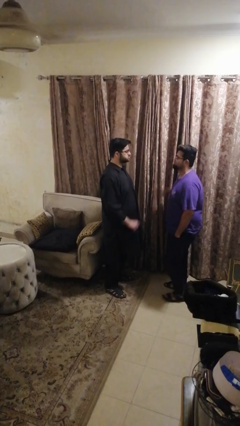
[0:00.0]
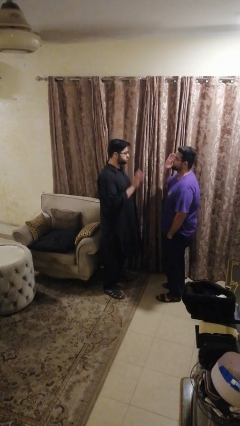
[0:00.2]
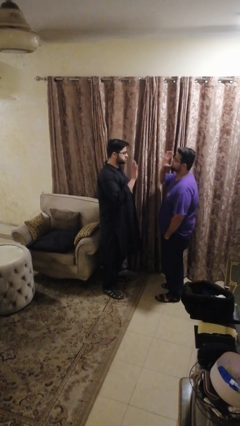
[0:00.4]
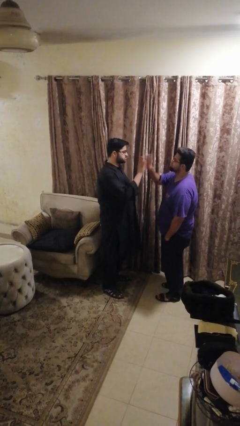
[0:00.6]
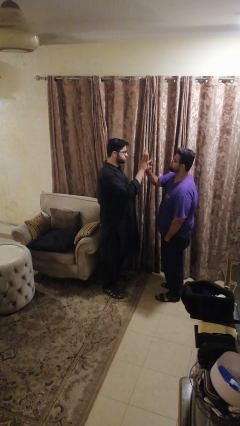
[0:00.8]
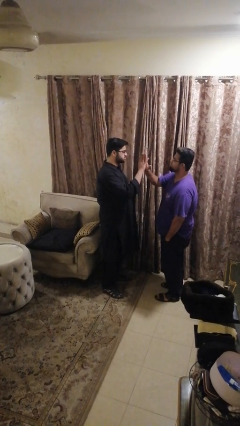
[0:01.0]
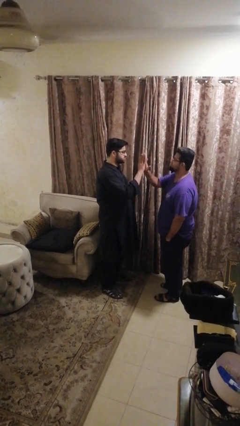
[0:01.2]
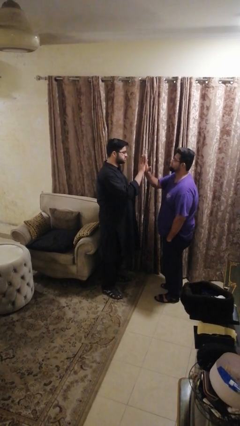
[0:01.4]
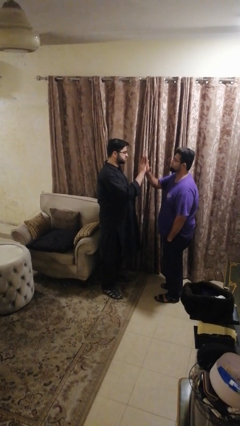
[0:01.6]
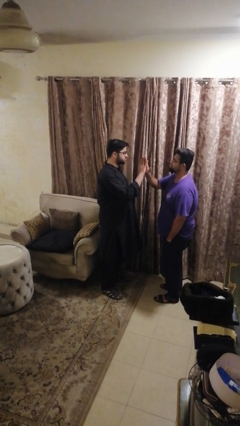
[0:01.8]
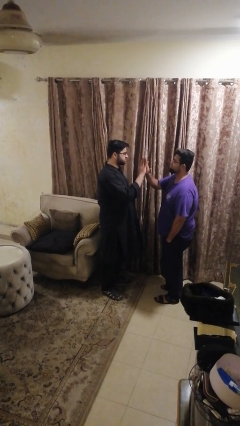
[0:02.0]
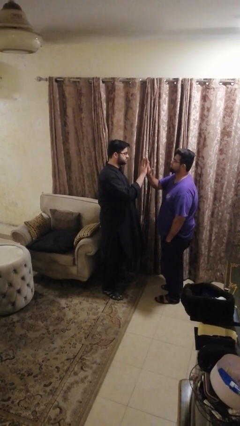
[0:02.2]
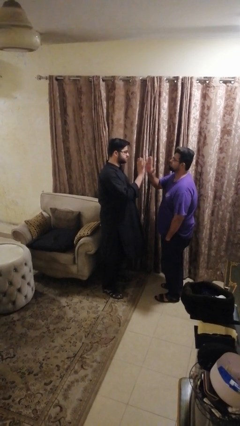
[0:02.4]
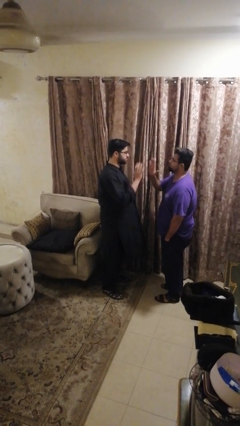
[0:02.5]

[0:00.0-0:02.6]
person highfives hand

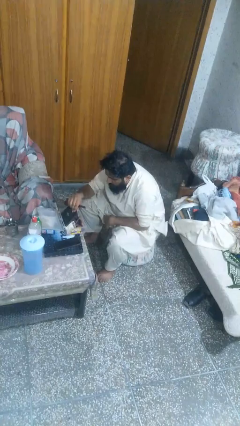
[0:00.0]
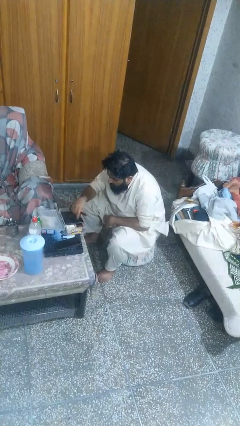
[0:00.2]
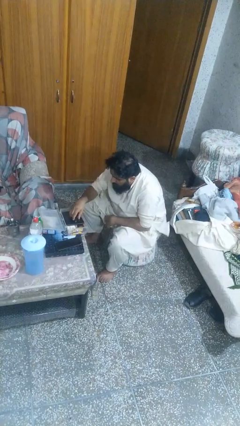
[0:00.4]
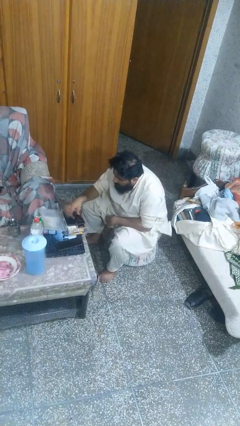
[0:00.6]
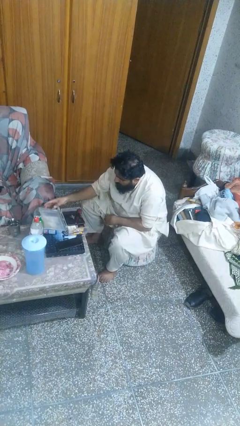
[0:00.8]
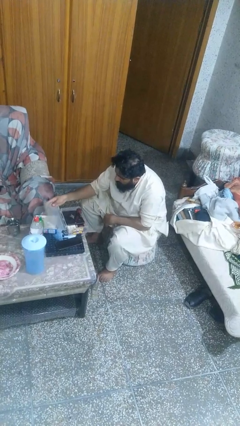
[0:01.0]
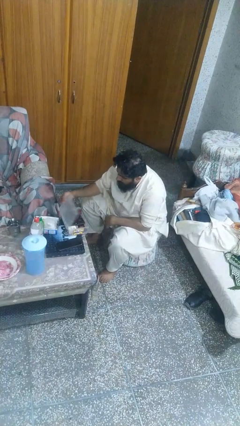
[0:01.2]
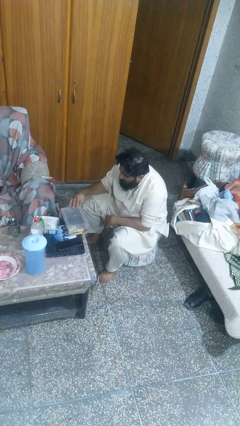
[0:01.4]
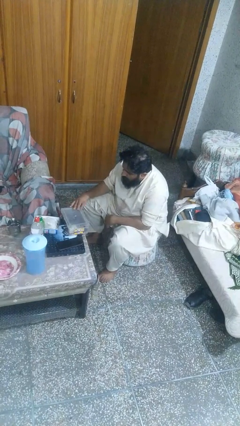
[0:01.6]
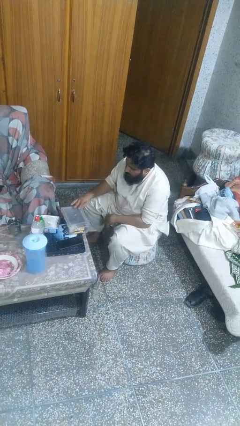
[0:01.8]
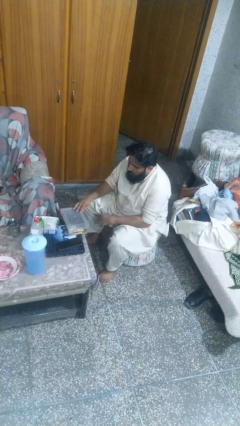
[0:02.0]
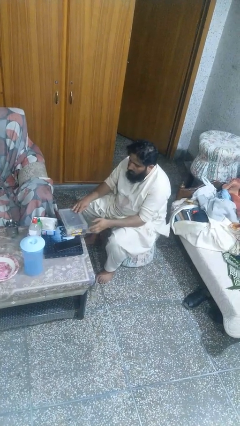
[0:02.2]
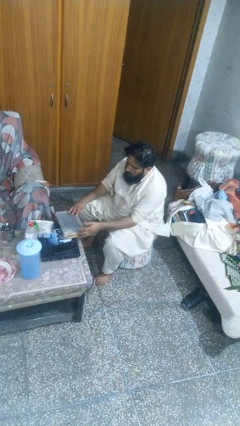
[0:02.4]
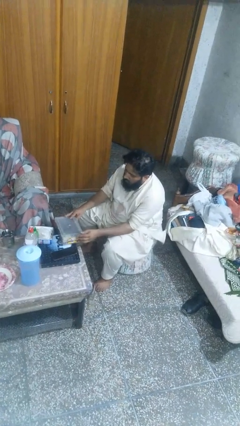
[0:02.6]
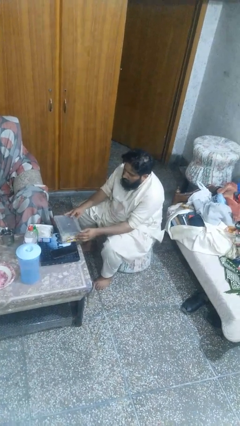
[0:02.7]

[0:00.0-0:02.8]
person closes jewelry box

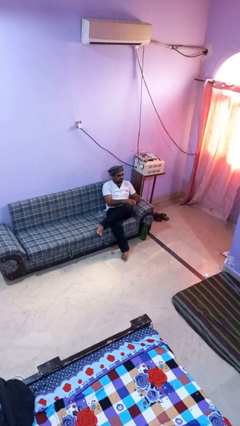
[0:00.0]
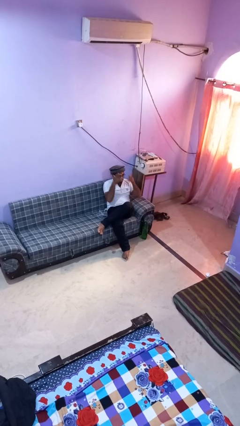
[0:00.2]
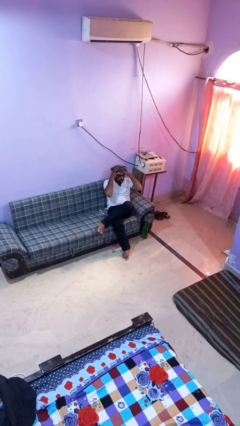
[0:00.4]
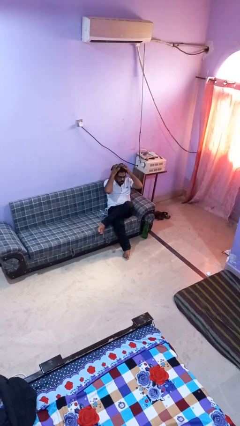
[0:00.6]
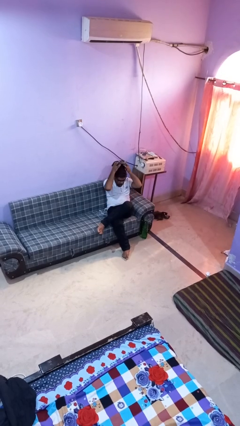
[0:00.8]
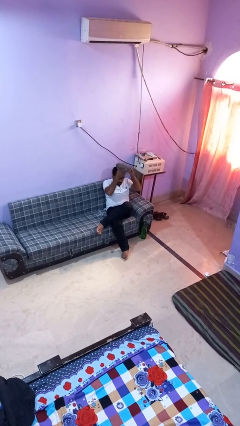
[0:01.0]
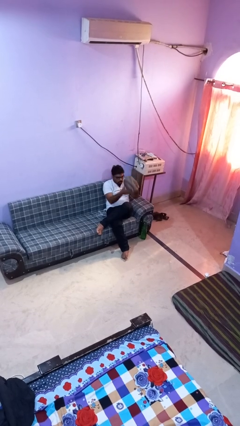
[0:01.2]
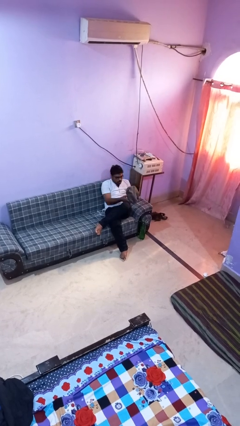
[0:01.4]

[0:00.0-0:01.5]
person takes off hat

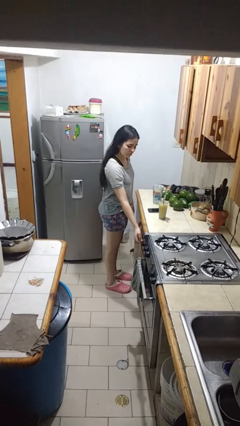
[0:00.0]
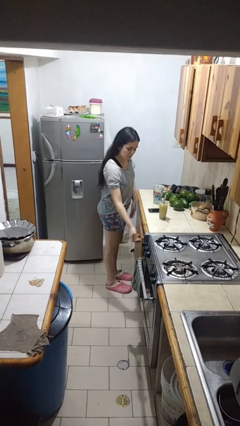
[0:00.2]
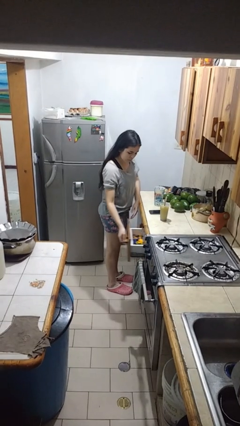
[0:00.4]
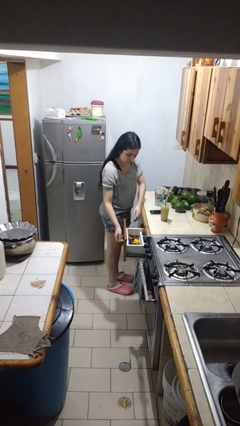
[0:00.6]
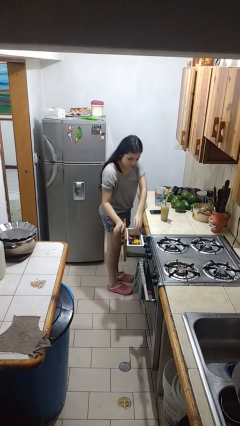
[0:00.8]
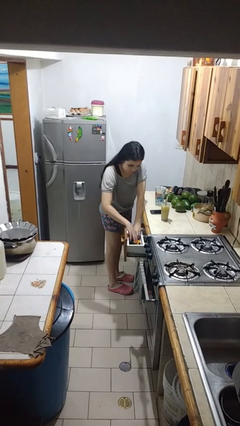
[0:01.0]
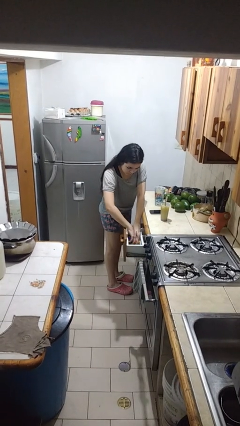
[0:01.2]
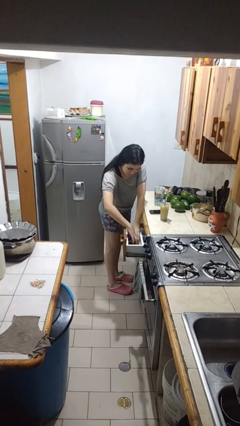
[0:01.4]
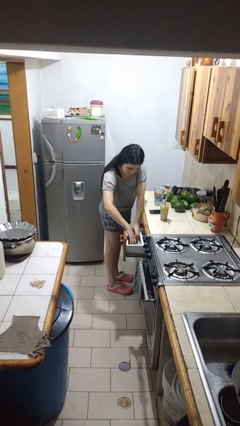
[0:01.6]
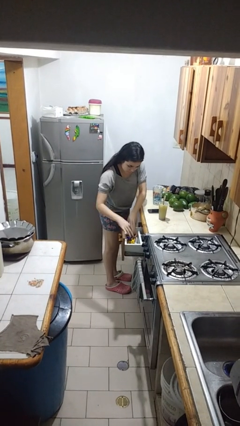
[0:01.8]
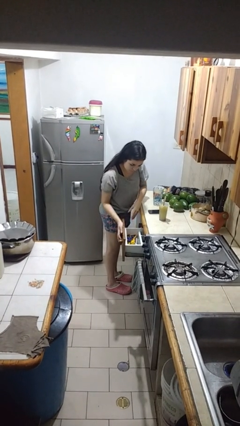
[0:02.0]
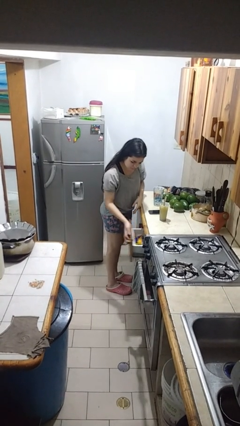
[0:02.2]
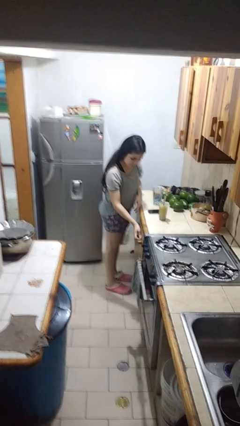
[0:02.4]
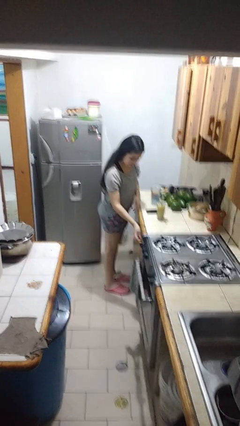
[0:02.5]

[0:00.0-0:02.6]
person searches in kitchen drawer

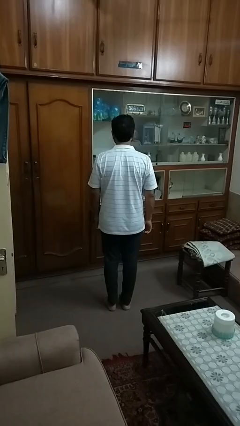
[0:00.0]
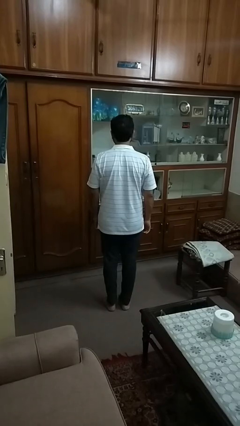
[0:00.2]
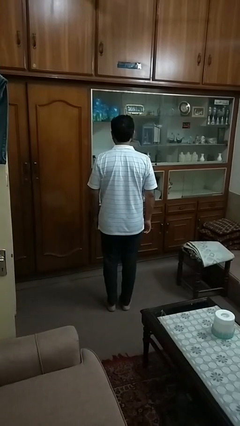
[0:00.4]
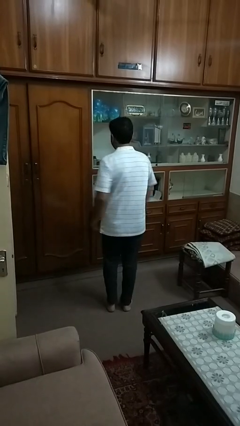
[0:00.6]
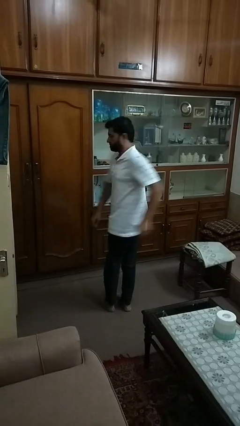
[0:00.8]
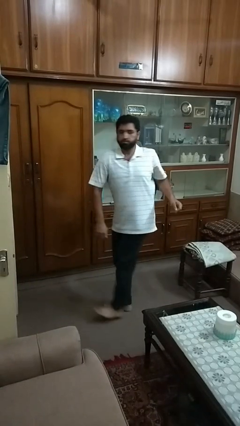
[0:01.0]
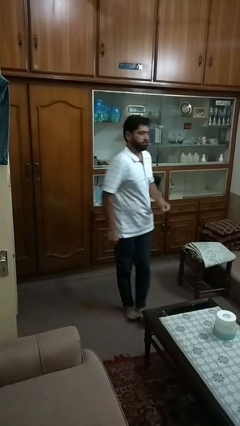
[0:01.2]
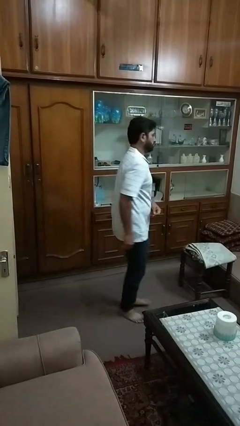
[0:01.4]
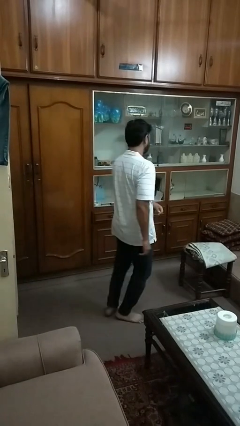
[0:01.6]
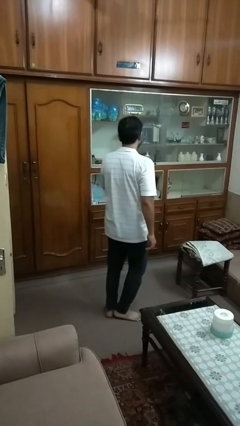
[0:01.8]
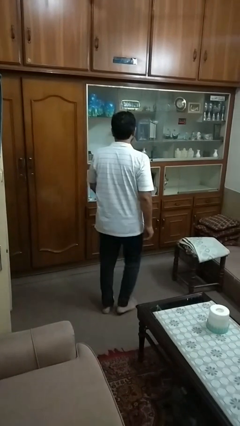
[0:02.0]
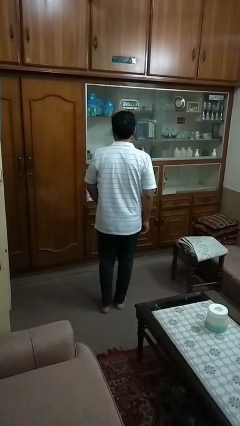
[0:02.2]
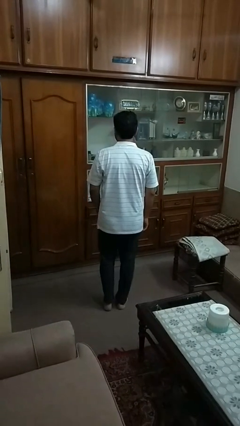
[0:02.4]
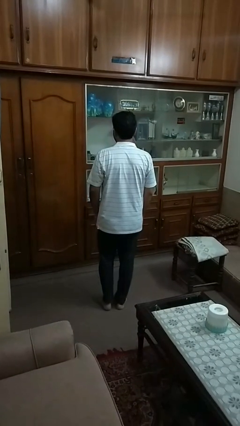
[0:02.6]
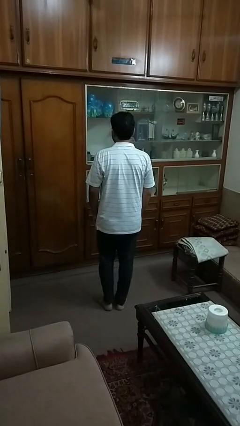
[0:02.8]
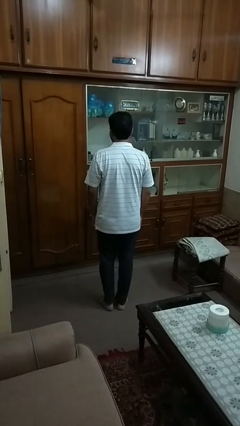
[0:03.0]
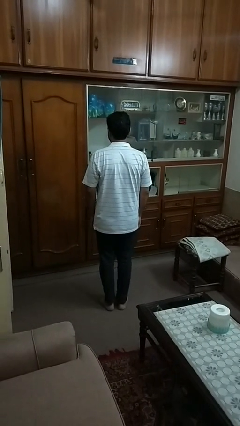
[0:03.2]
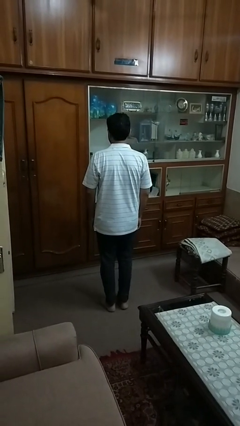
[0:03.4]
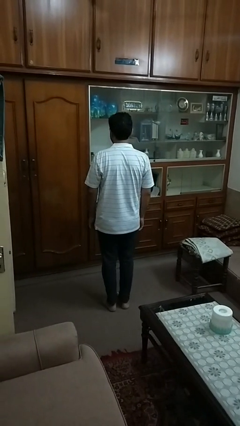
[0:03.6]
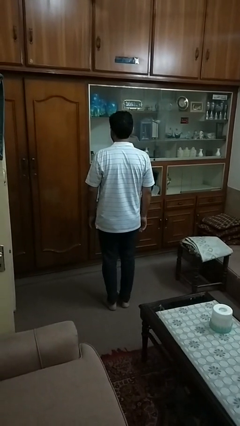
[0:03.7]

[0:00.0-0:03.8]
person twirls

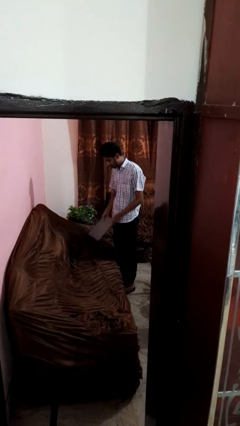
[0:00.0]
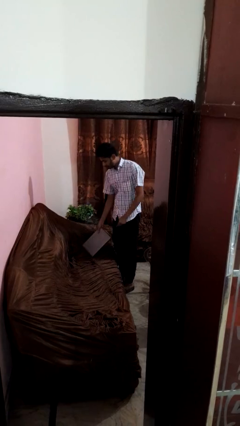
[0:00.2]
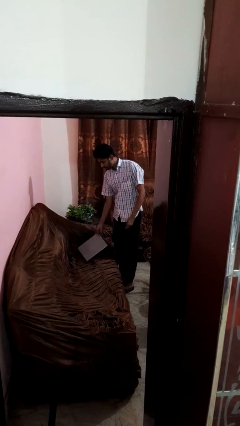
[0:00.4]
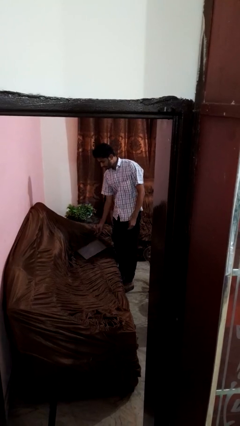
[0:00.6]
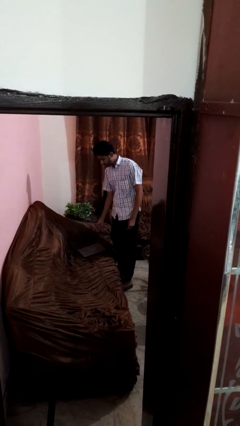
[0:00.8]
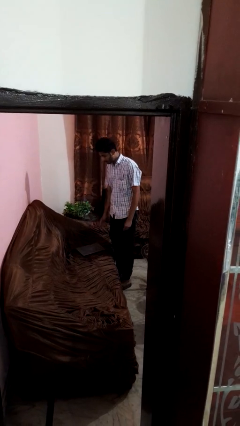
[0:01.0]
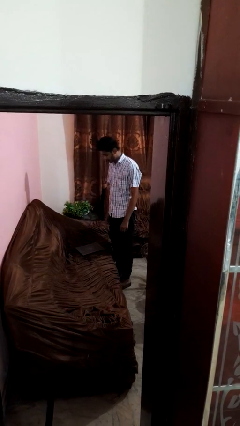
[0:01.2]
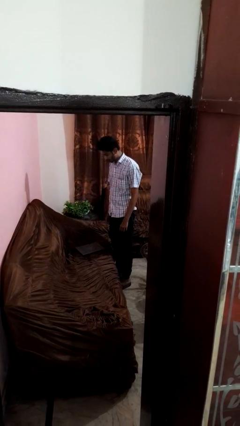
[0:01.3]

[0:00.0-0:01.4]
person puts down object on couch

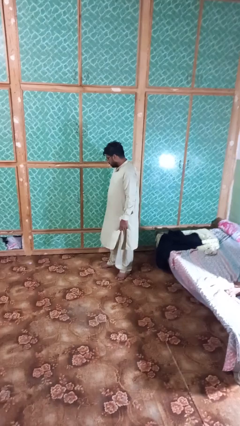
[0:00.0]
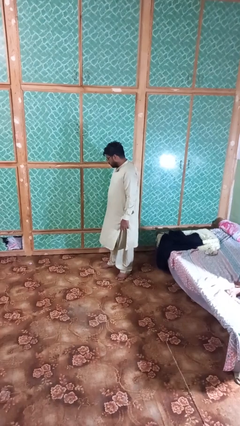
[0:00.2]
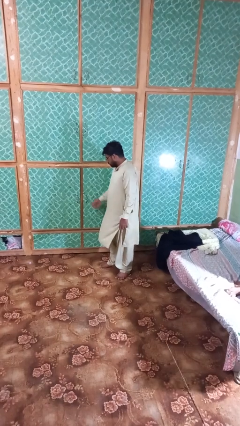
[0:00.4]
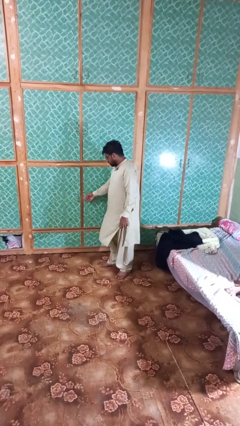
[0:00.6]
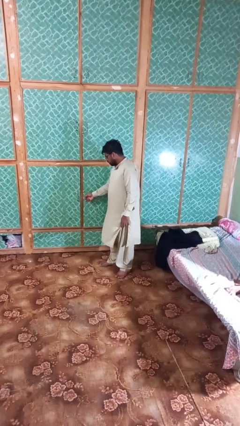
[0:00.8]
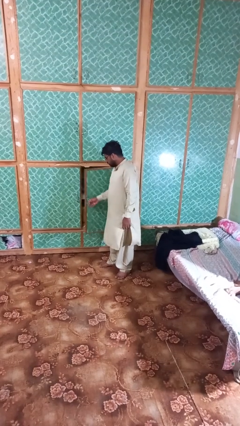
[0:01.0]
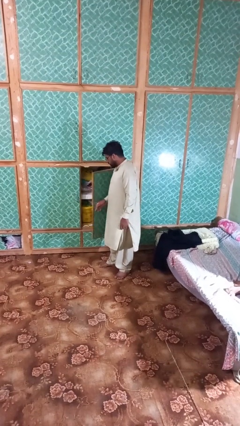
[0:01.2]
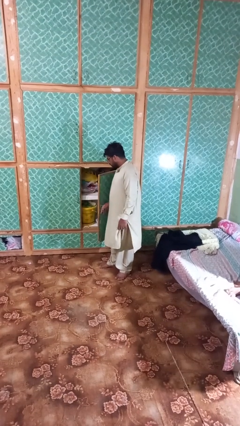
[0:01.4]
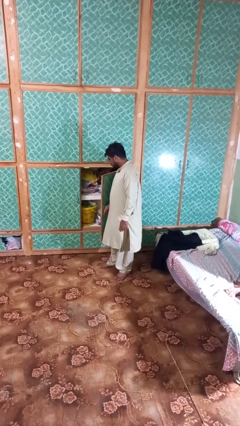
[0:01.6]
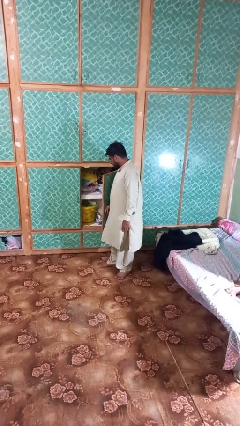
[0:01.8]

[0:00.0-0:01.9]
person opens closet door

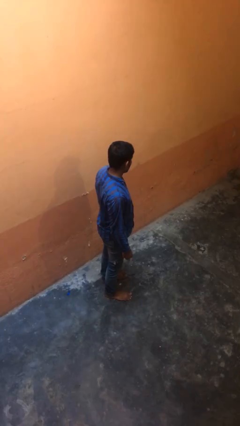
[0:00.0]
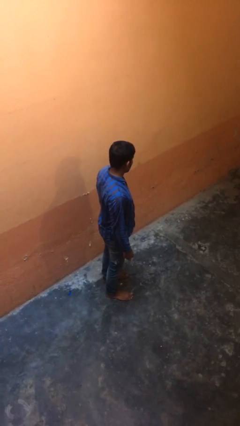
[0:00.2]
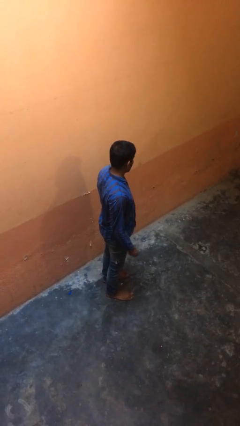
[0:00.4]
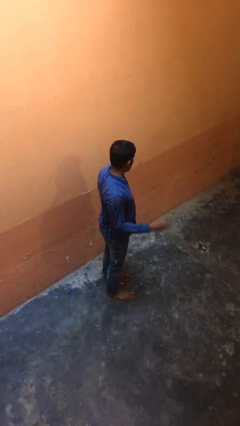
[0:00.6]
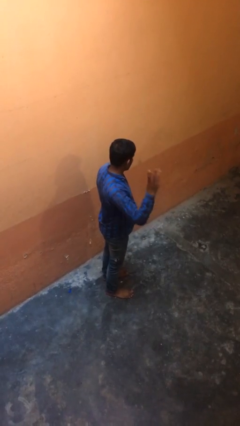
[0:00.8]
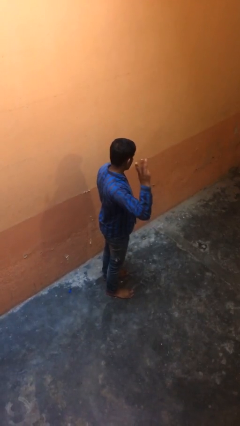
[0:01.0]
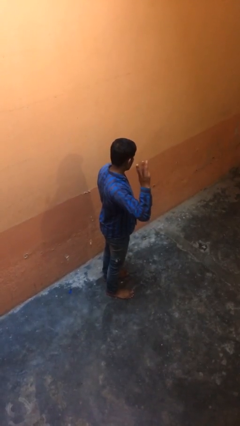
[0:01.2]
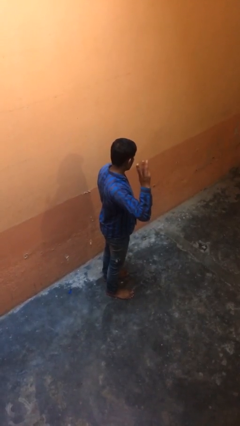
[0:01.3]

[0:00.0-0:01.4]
person gestures number three
